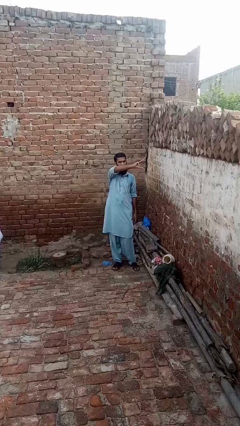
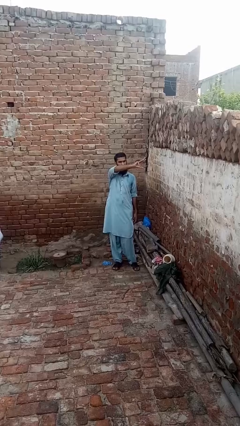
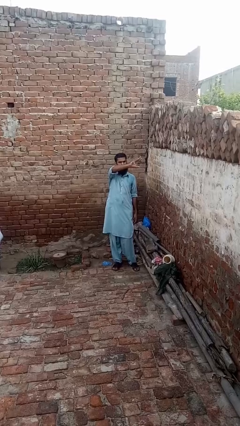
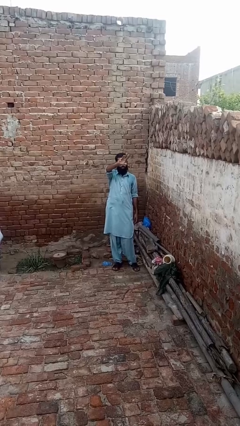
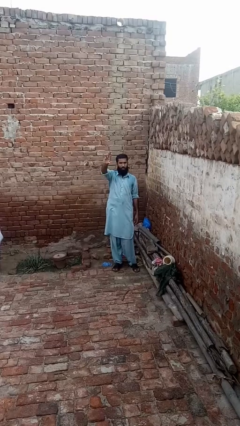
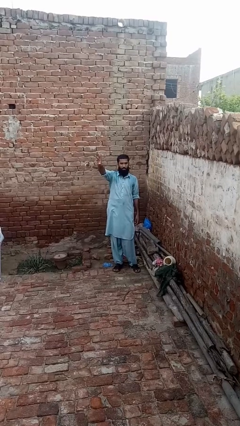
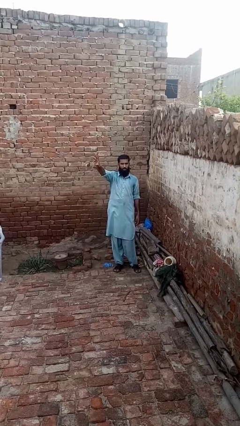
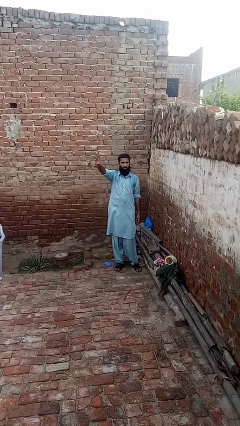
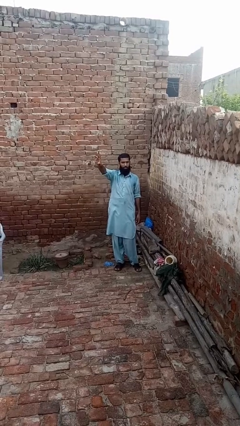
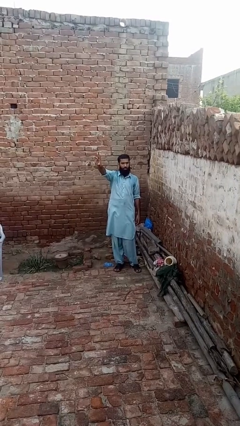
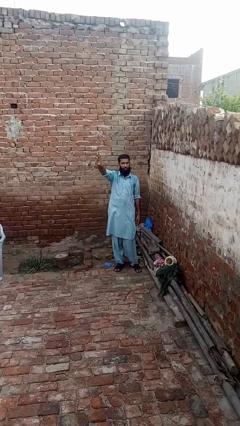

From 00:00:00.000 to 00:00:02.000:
person gestures swipe right

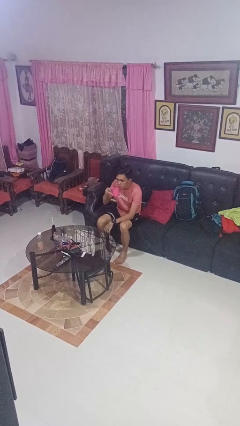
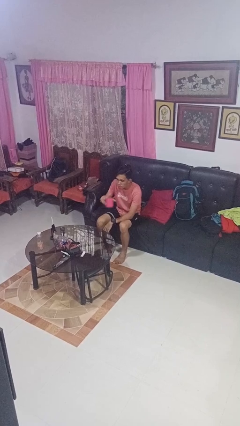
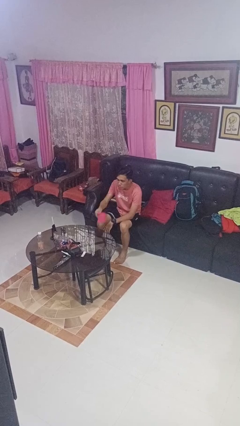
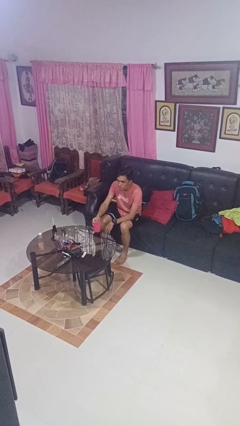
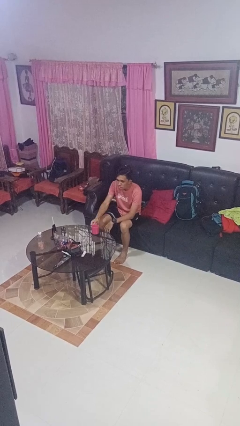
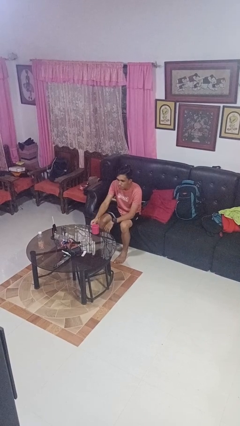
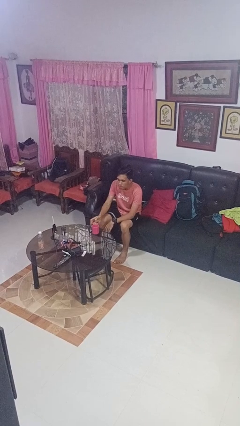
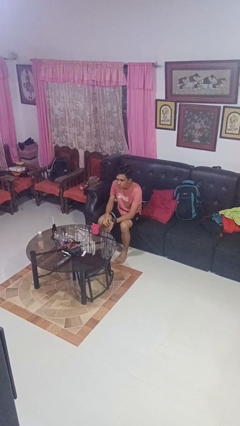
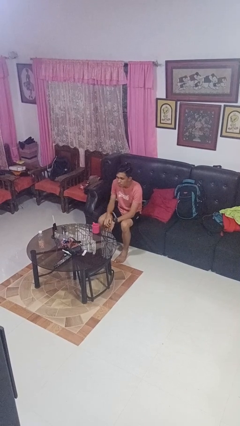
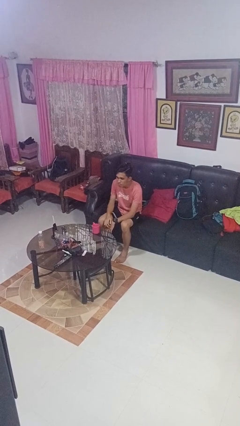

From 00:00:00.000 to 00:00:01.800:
person puts down object on table

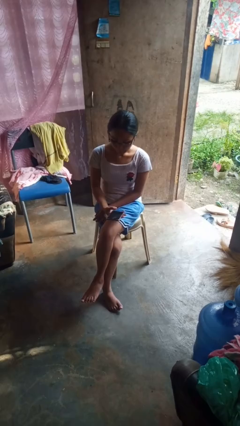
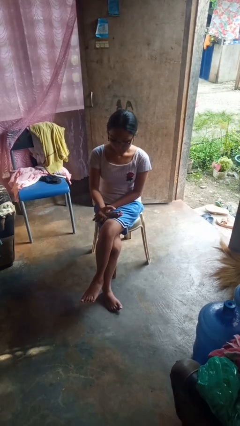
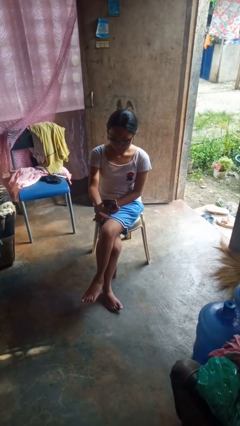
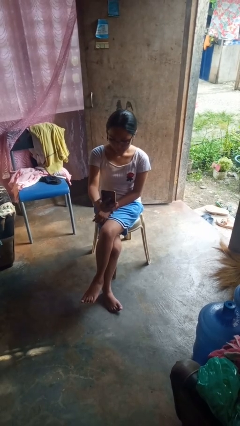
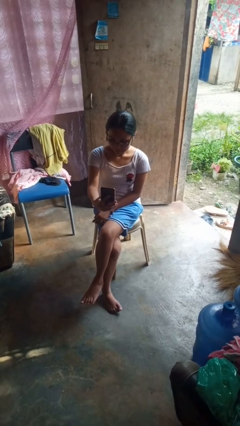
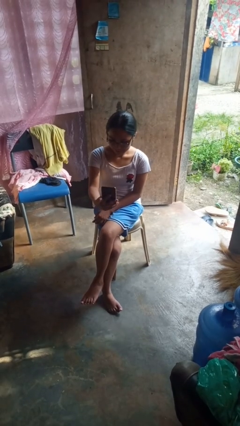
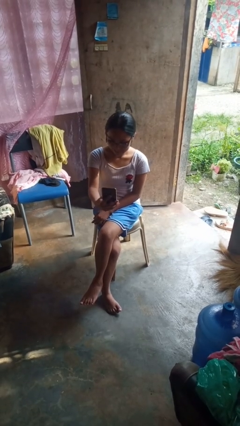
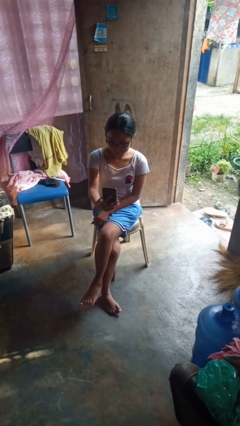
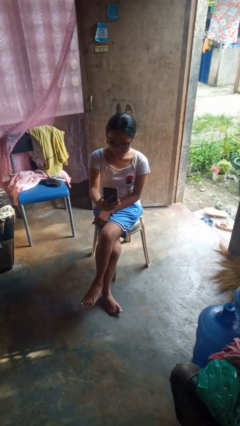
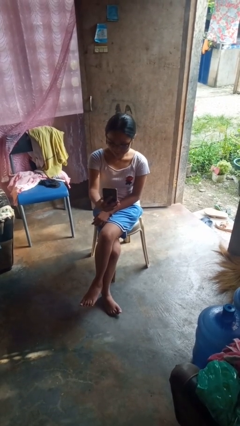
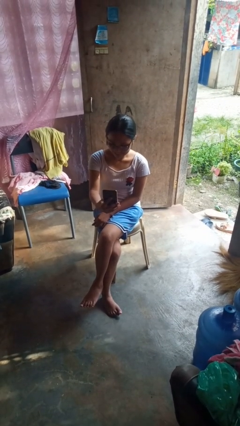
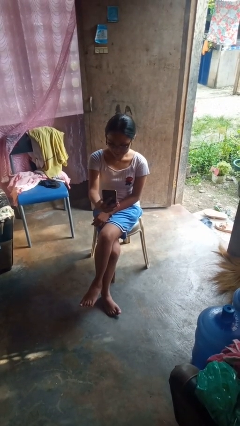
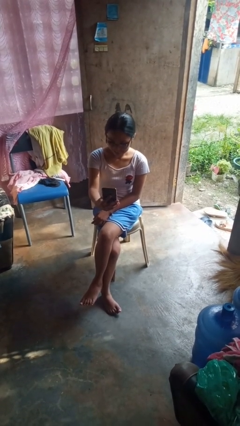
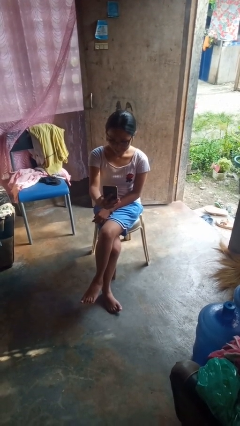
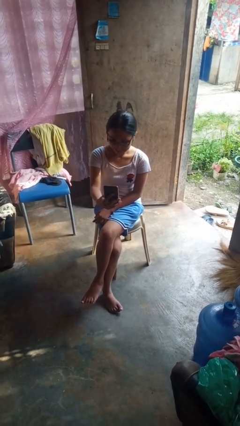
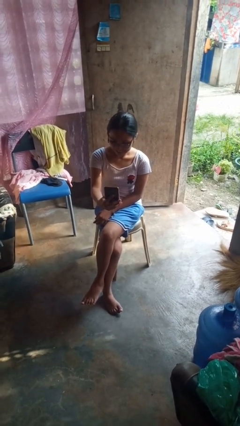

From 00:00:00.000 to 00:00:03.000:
person takes selfie

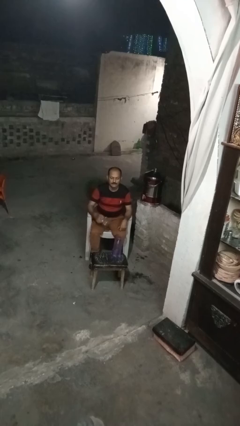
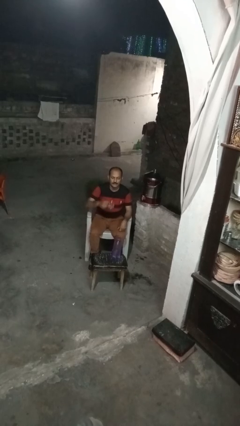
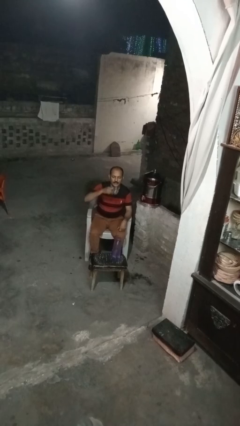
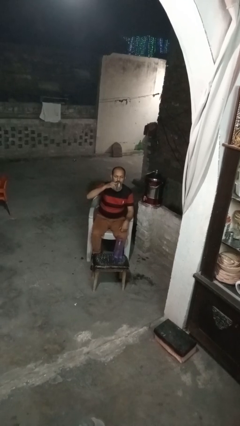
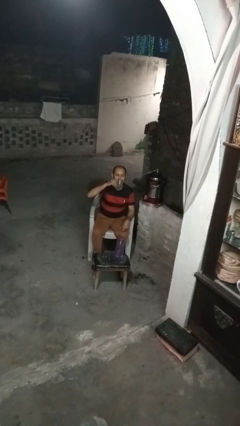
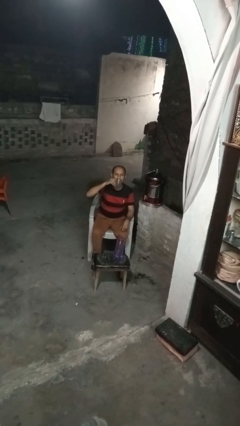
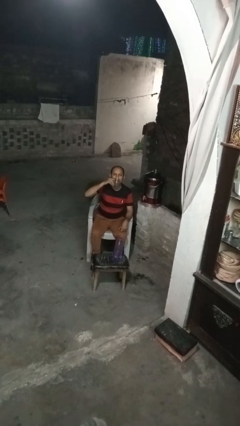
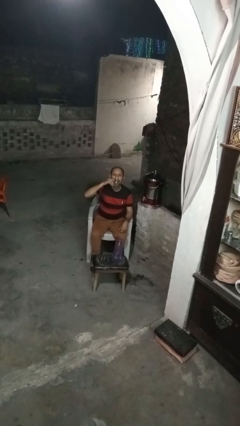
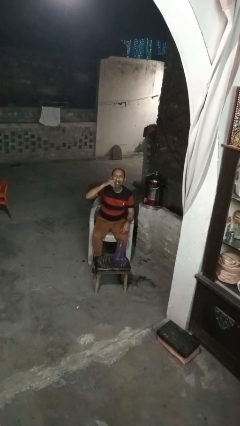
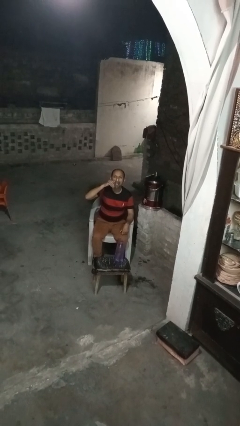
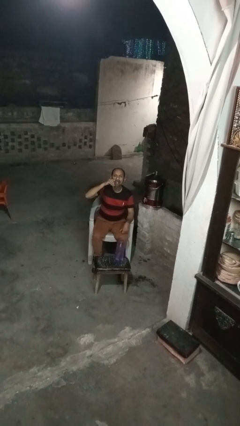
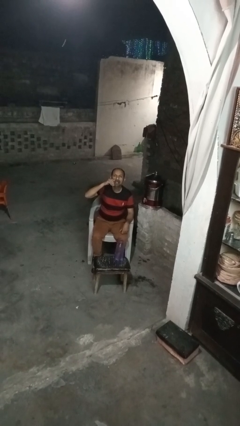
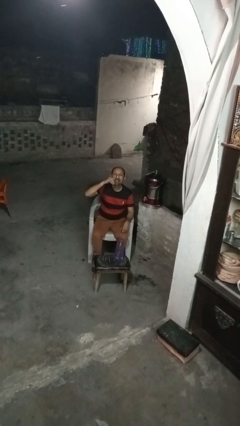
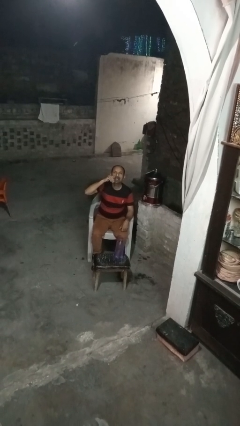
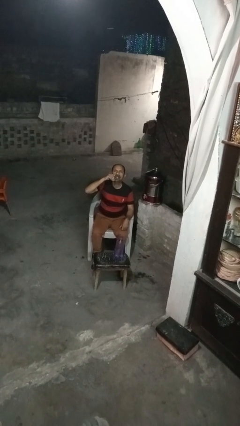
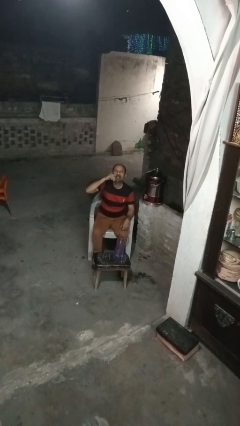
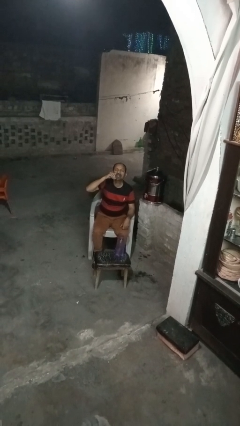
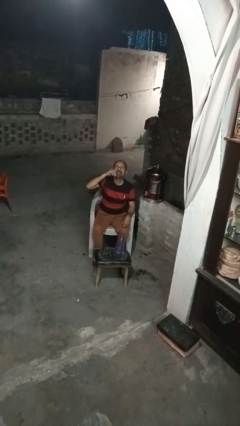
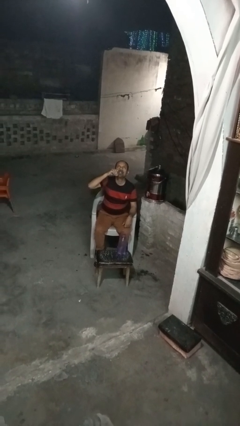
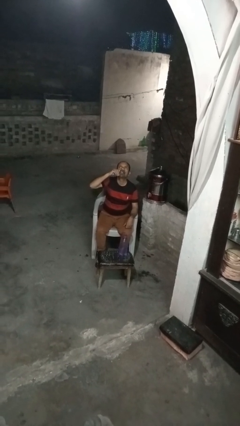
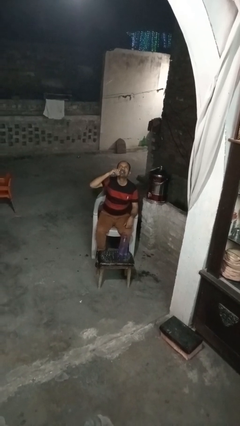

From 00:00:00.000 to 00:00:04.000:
person drinks from shotglass

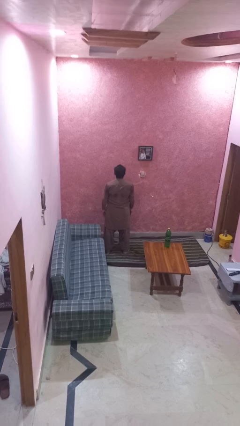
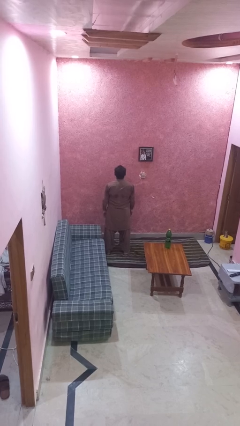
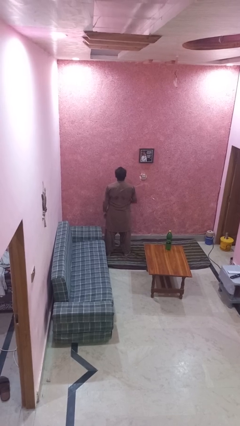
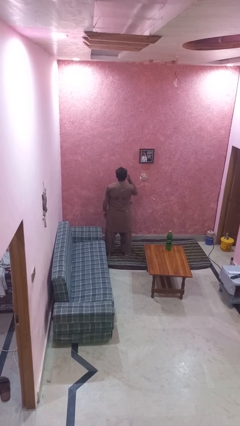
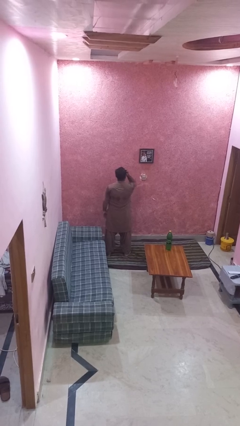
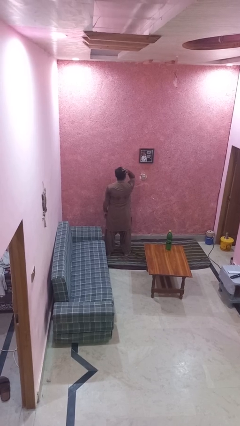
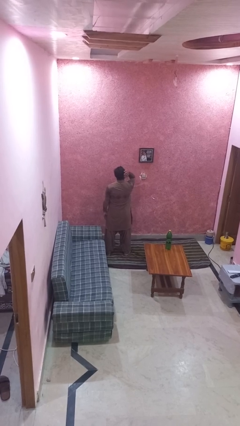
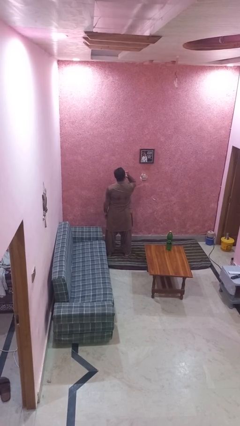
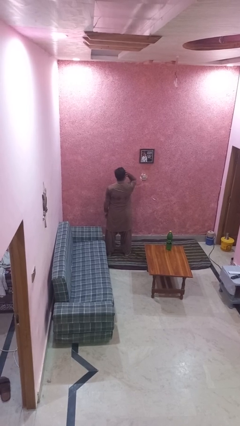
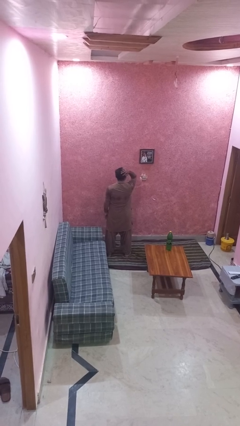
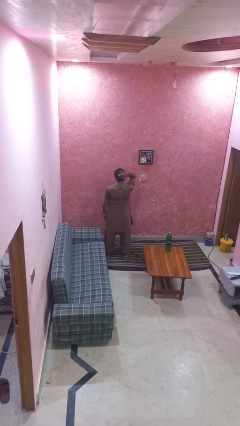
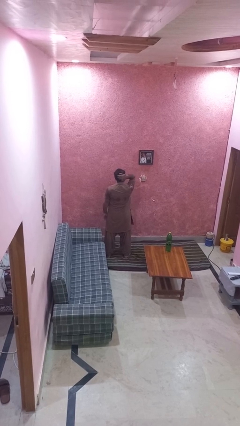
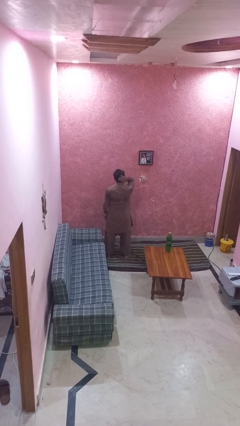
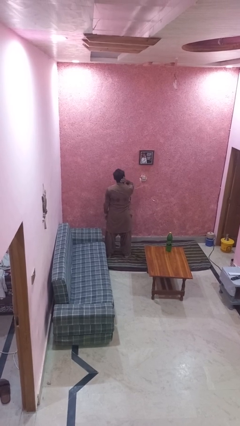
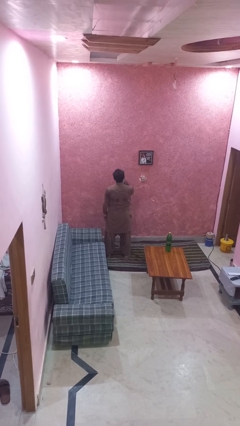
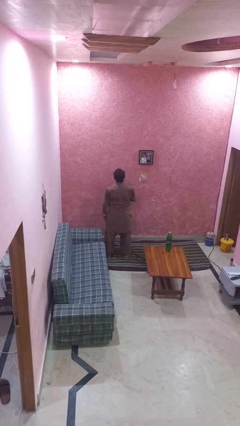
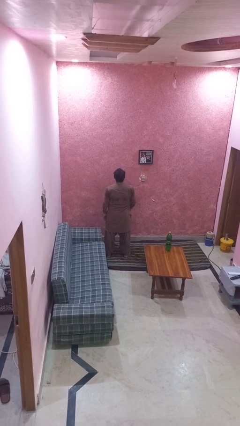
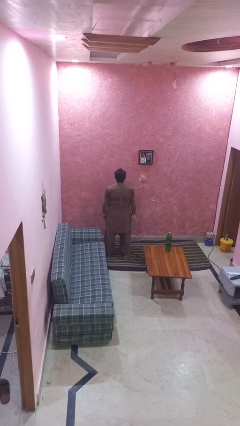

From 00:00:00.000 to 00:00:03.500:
person strokes hair

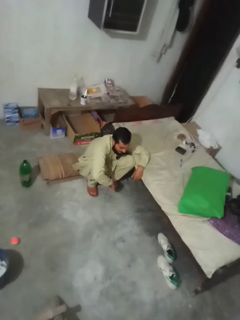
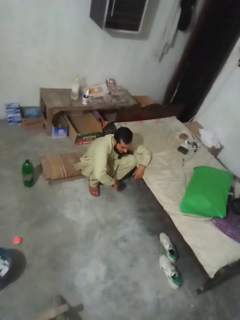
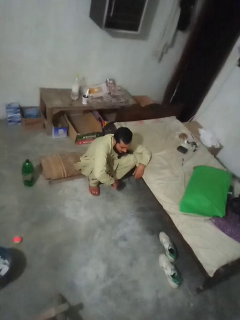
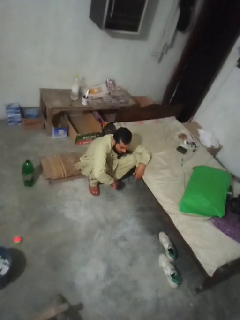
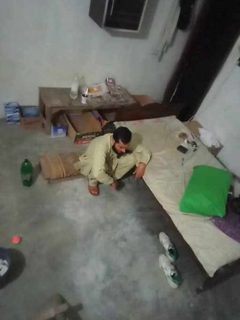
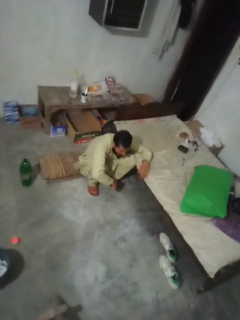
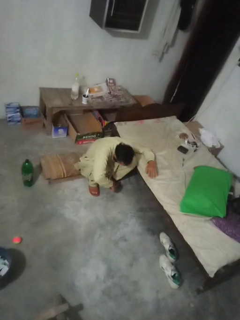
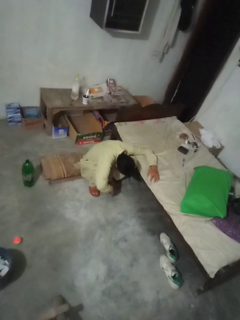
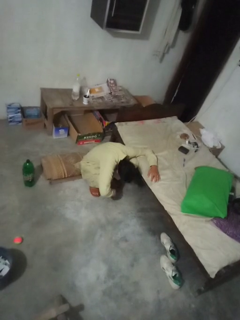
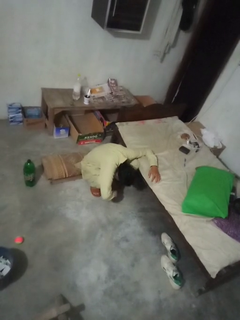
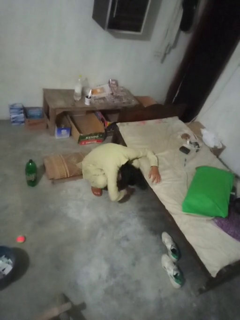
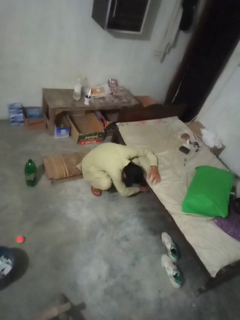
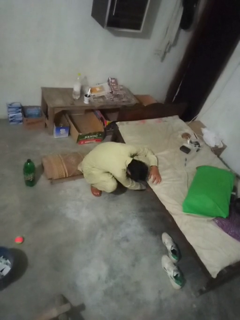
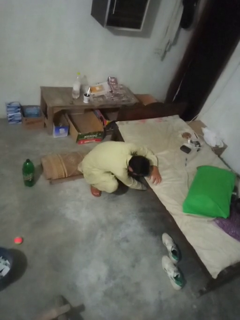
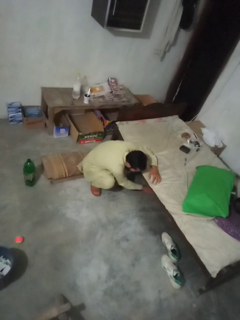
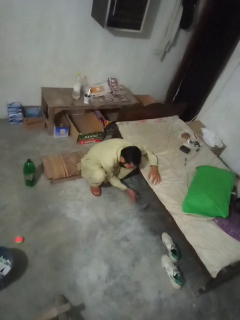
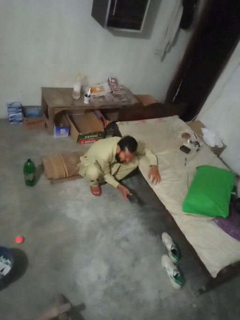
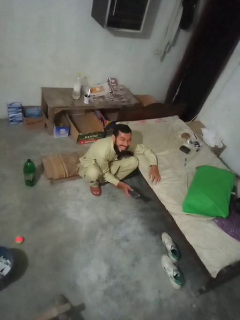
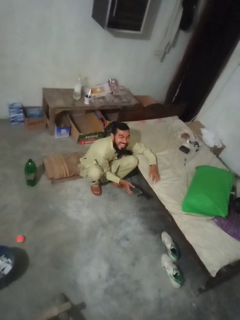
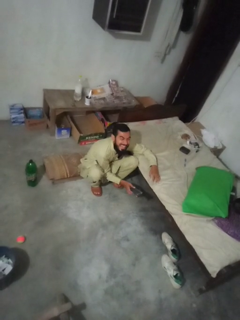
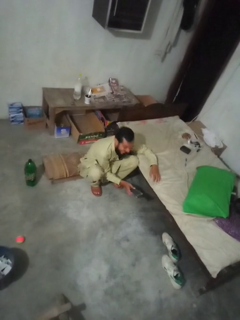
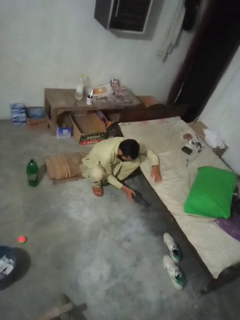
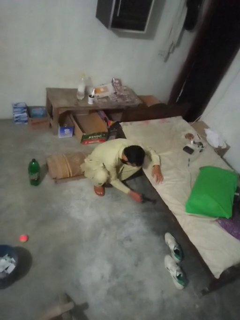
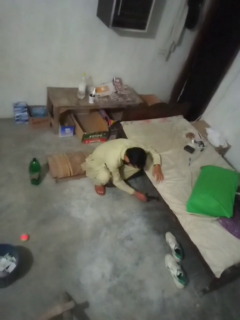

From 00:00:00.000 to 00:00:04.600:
person searches under couch
